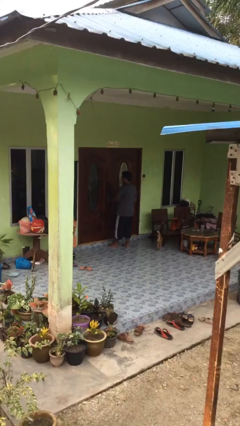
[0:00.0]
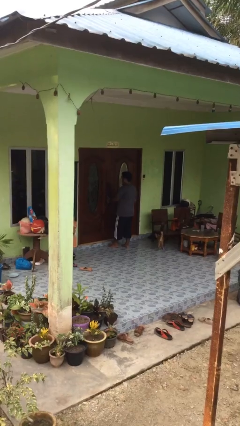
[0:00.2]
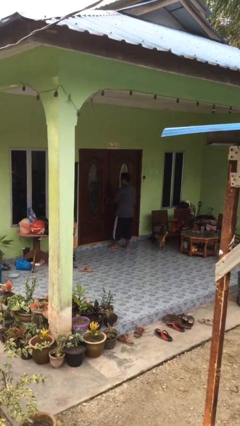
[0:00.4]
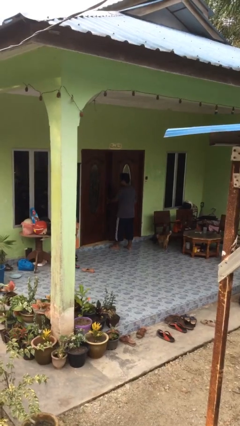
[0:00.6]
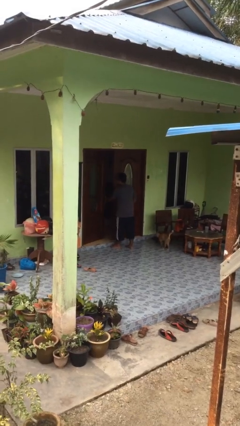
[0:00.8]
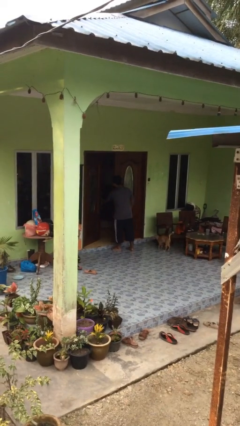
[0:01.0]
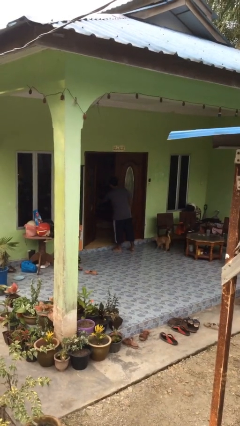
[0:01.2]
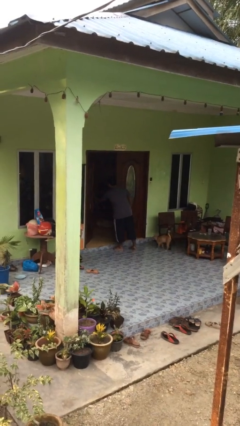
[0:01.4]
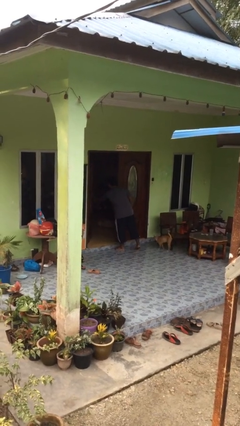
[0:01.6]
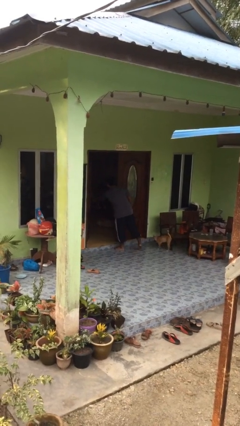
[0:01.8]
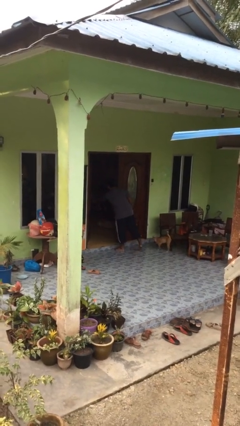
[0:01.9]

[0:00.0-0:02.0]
person opens facility door

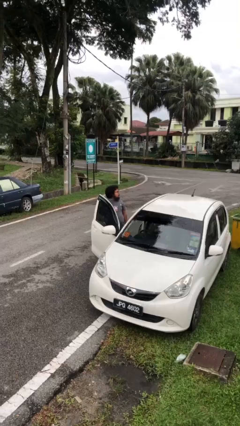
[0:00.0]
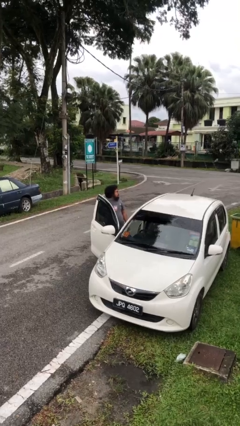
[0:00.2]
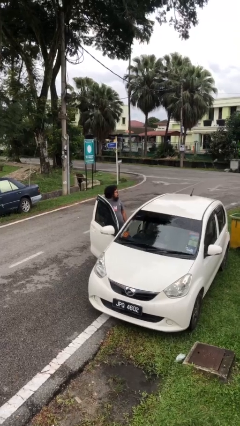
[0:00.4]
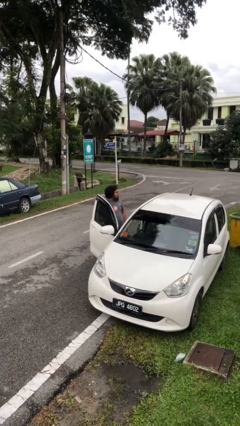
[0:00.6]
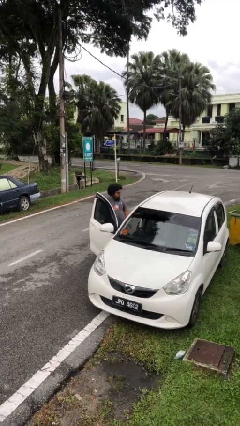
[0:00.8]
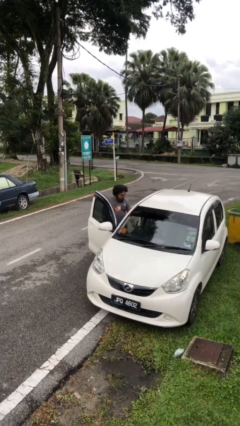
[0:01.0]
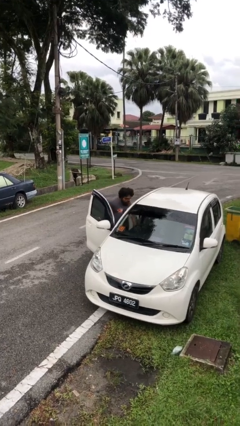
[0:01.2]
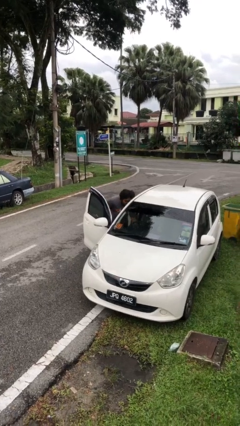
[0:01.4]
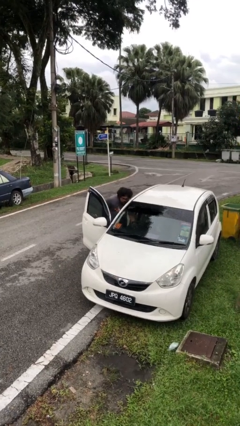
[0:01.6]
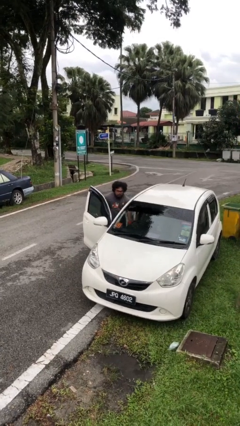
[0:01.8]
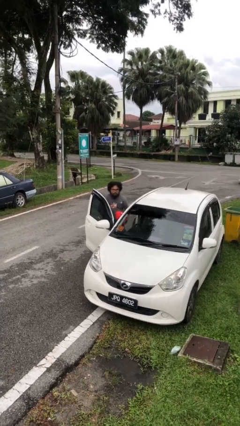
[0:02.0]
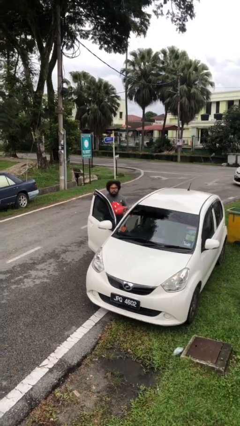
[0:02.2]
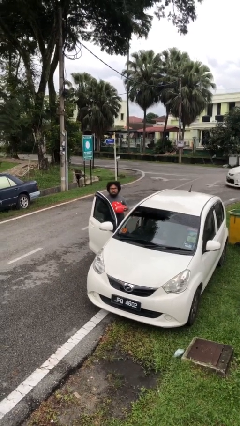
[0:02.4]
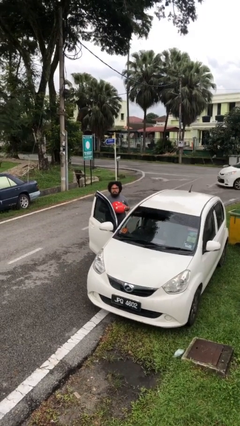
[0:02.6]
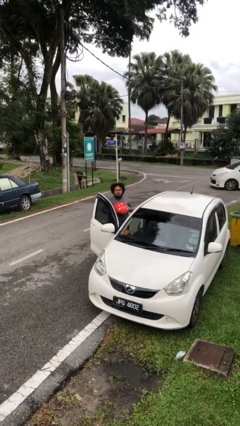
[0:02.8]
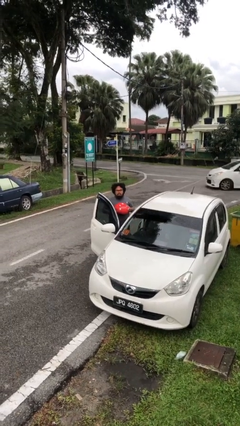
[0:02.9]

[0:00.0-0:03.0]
person unloads car

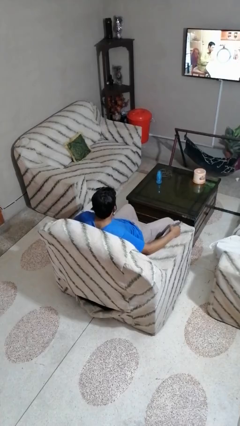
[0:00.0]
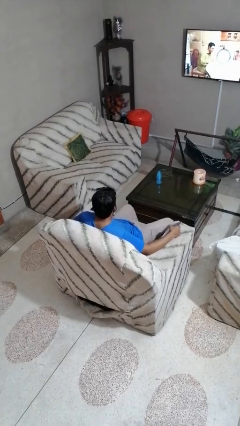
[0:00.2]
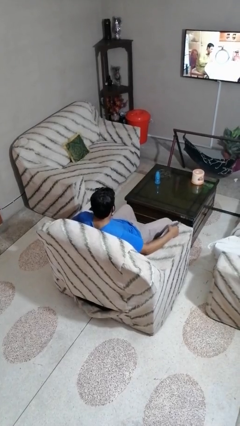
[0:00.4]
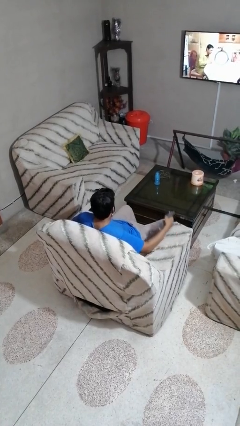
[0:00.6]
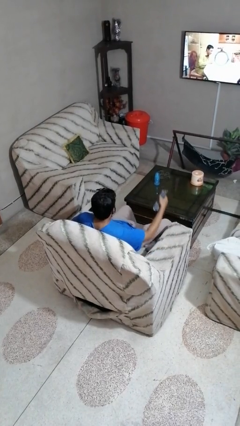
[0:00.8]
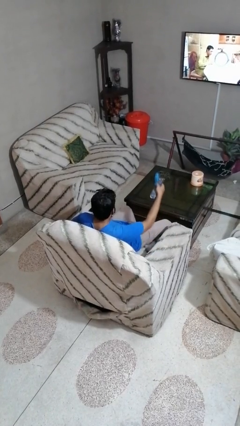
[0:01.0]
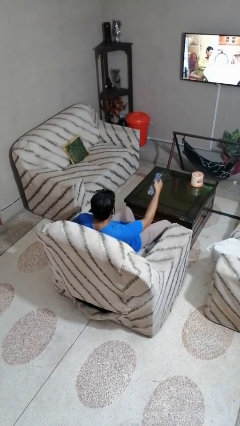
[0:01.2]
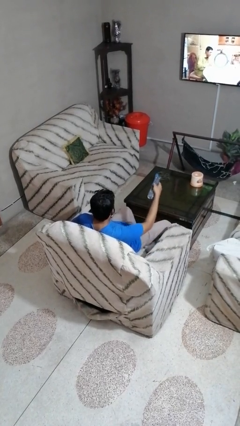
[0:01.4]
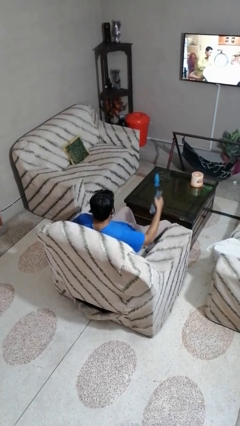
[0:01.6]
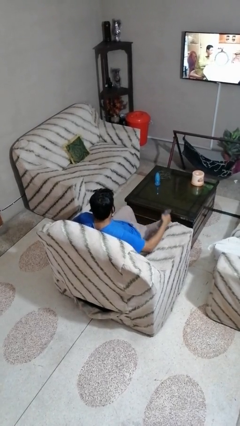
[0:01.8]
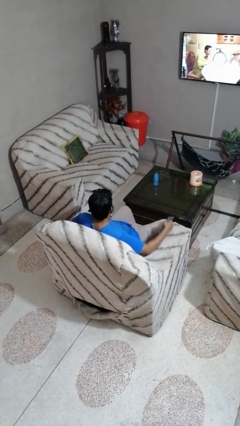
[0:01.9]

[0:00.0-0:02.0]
person uses television remote

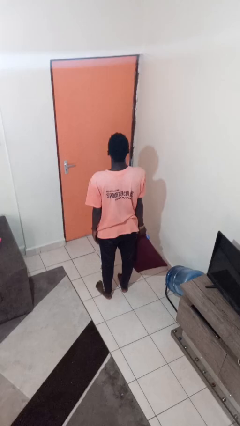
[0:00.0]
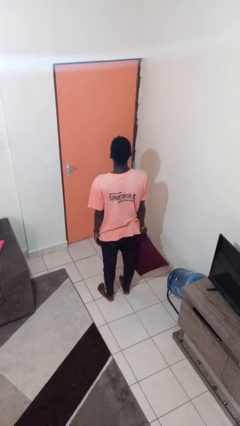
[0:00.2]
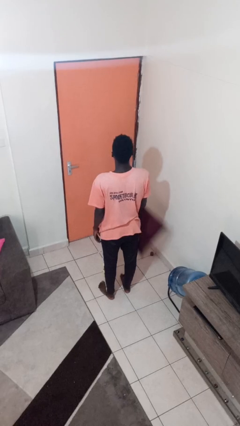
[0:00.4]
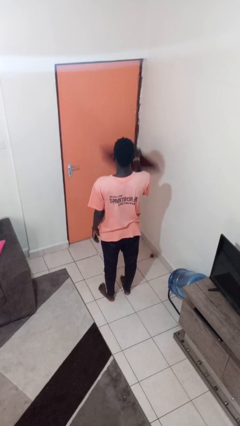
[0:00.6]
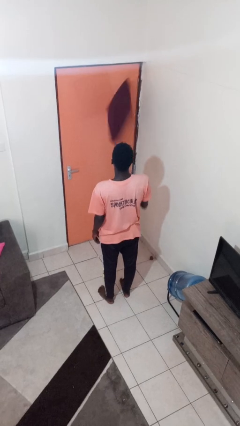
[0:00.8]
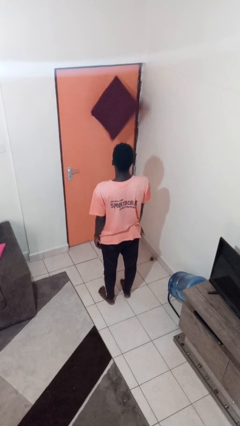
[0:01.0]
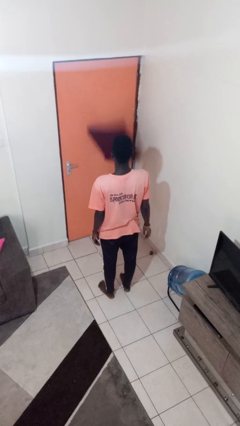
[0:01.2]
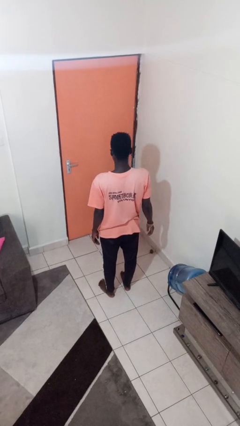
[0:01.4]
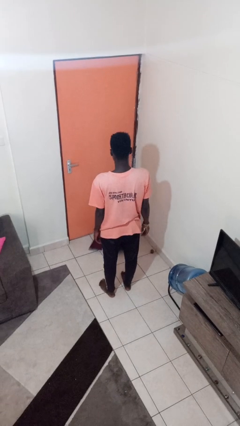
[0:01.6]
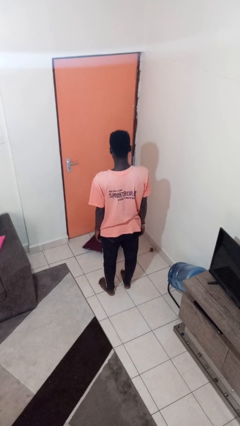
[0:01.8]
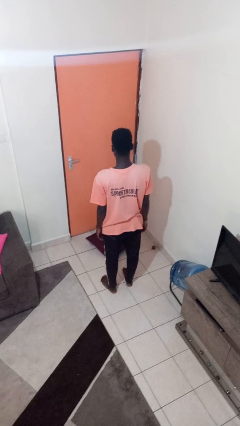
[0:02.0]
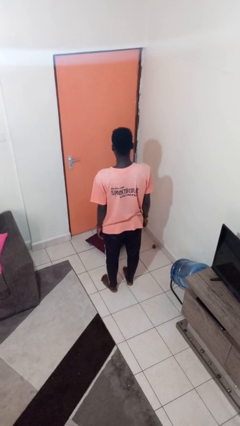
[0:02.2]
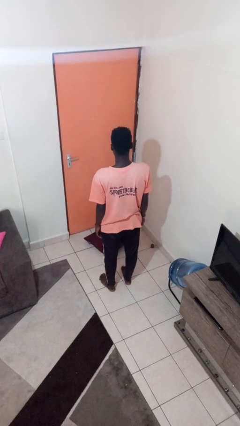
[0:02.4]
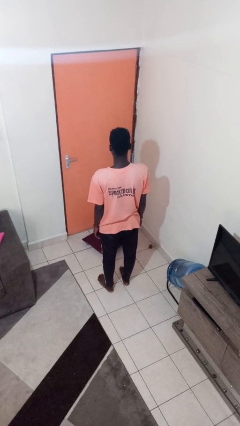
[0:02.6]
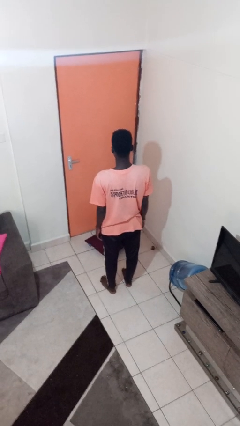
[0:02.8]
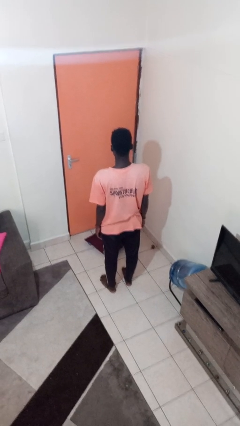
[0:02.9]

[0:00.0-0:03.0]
person throws object into air

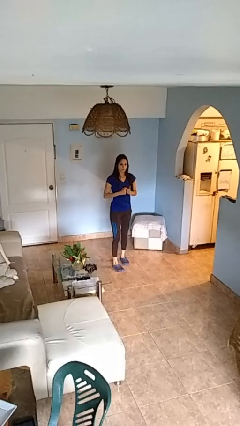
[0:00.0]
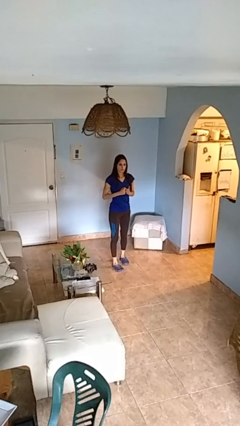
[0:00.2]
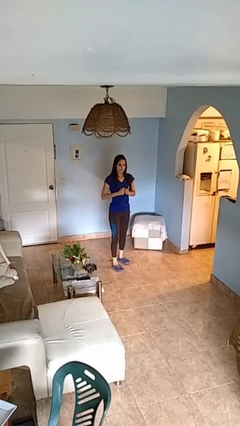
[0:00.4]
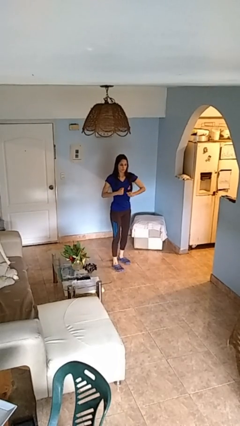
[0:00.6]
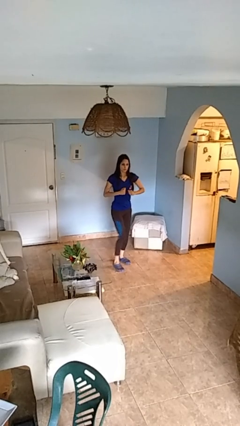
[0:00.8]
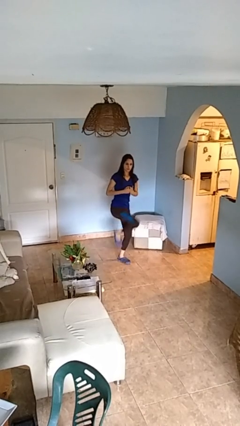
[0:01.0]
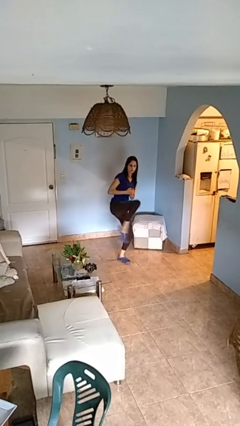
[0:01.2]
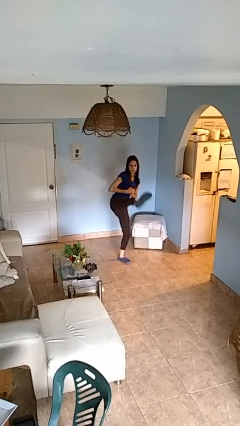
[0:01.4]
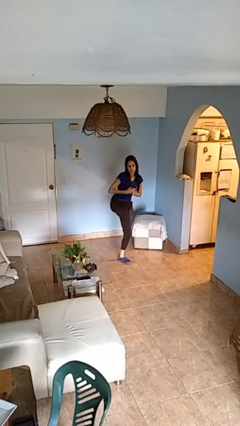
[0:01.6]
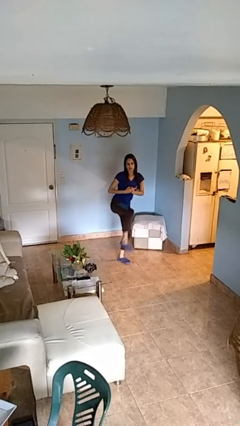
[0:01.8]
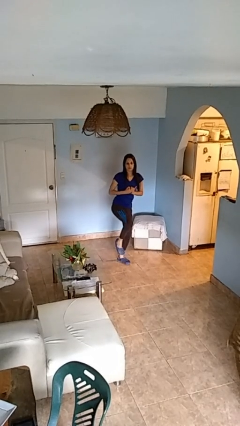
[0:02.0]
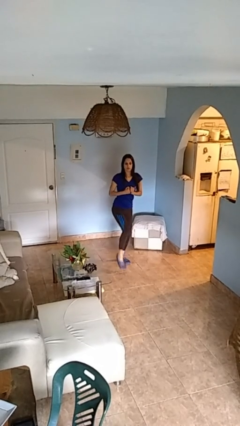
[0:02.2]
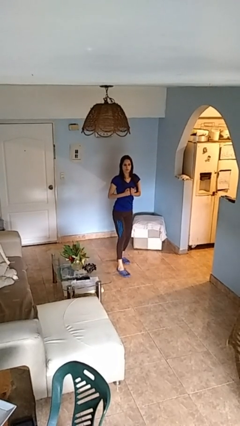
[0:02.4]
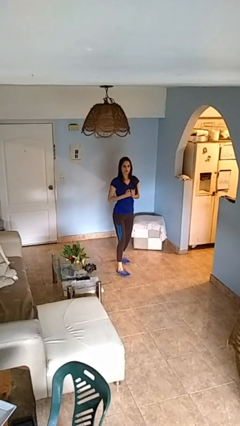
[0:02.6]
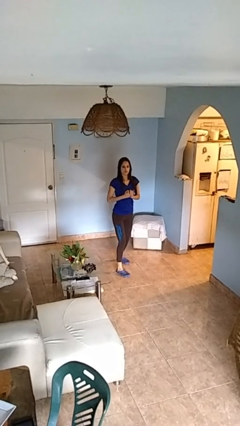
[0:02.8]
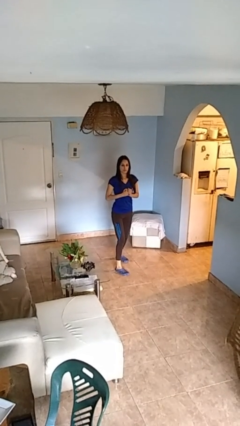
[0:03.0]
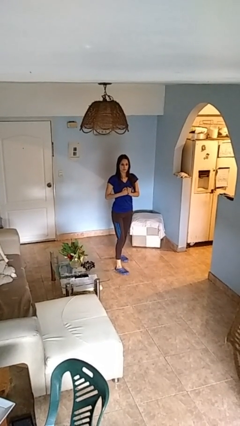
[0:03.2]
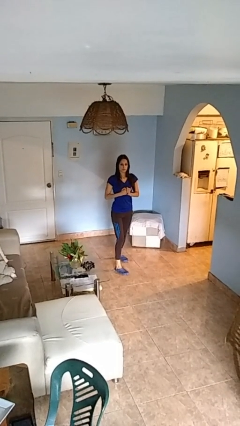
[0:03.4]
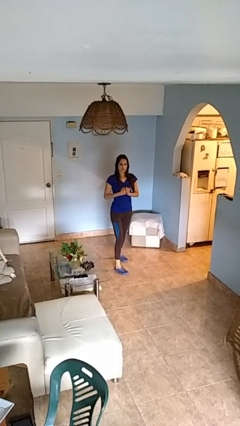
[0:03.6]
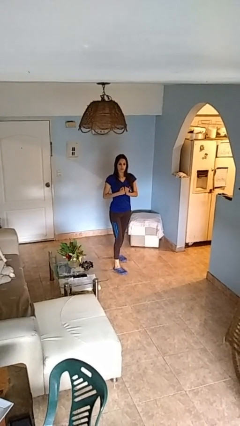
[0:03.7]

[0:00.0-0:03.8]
person karate kicks

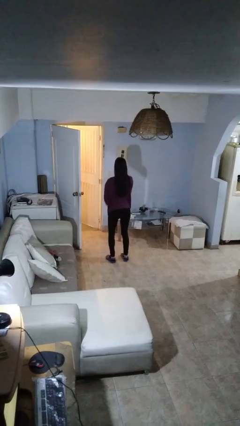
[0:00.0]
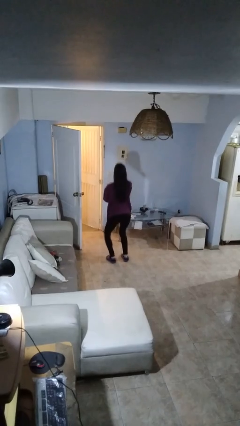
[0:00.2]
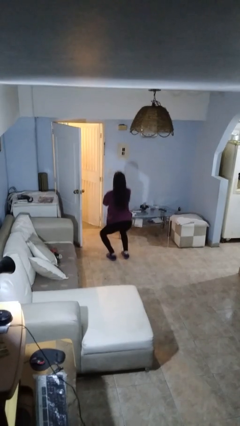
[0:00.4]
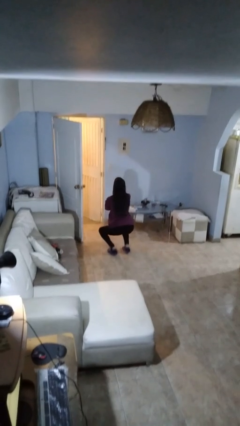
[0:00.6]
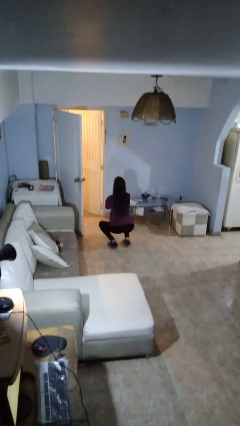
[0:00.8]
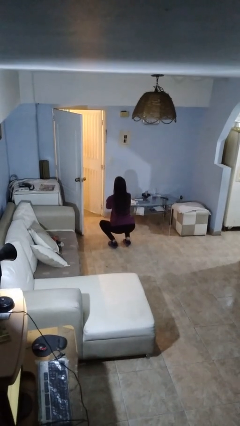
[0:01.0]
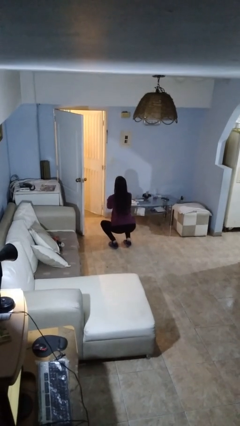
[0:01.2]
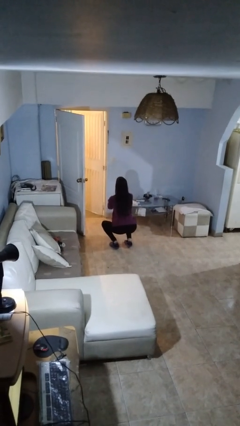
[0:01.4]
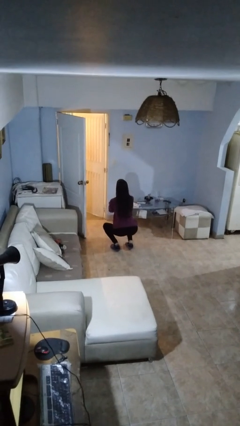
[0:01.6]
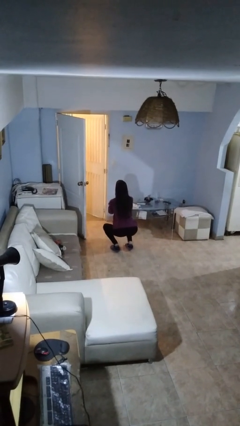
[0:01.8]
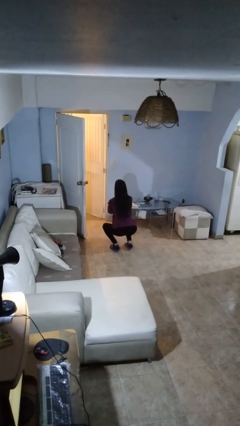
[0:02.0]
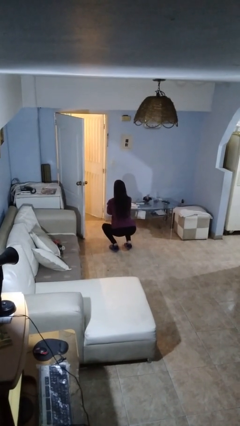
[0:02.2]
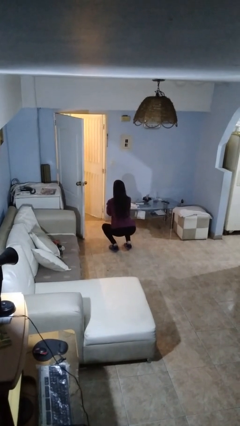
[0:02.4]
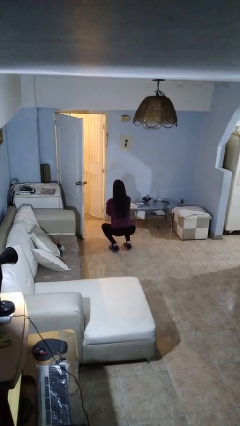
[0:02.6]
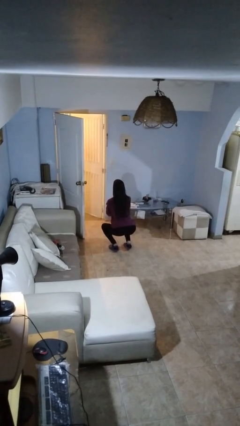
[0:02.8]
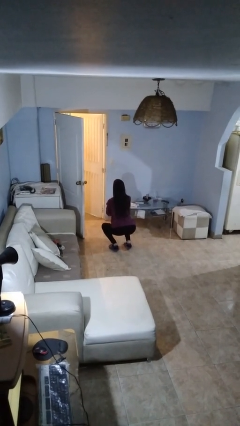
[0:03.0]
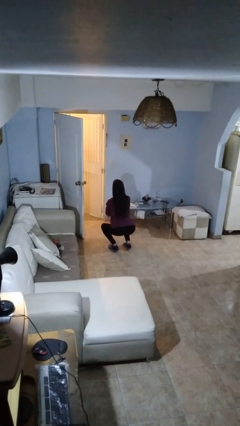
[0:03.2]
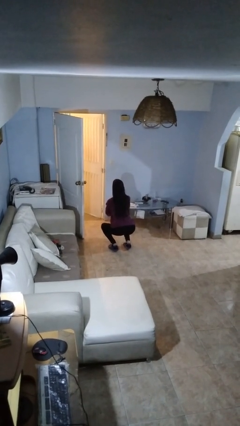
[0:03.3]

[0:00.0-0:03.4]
person squats

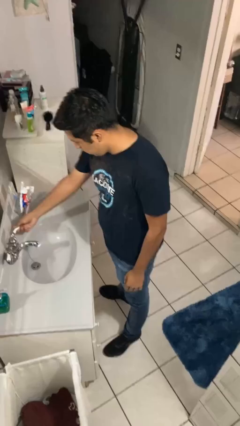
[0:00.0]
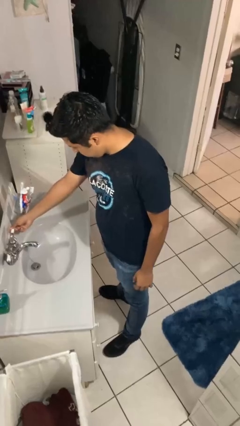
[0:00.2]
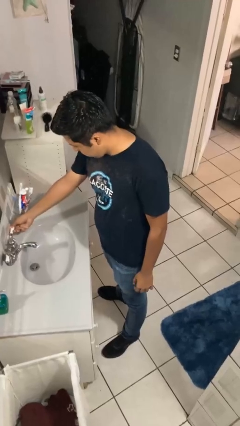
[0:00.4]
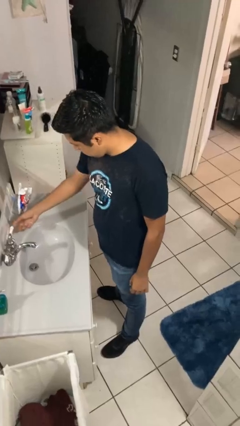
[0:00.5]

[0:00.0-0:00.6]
person turns off faucet
